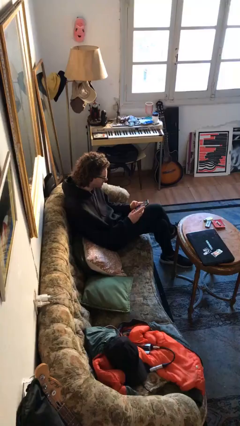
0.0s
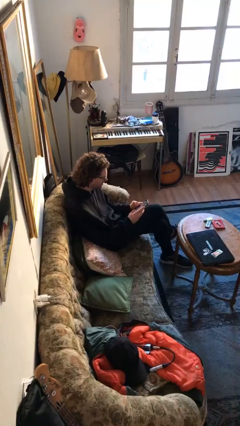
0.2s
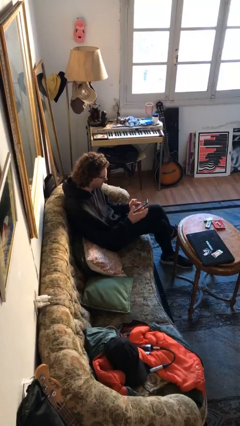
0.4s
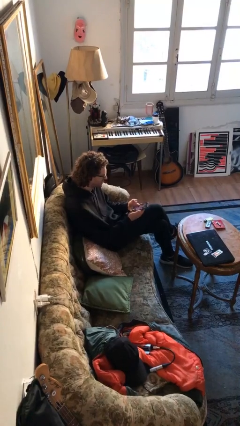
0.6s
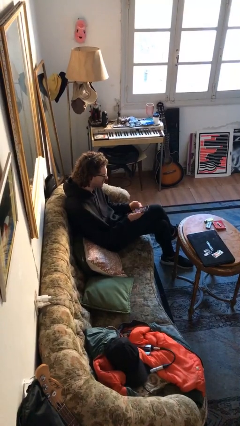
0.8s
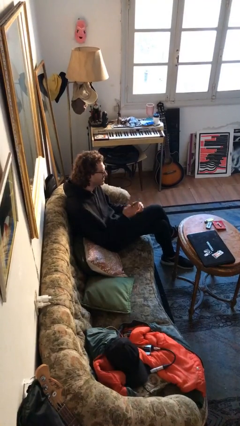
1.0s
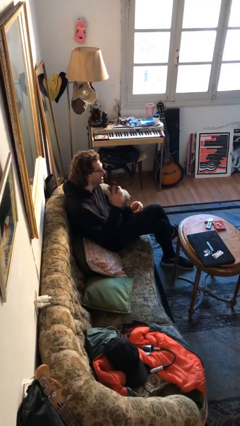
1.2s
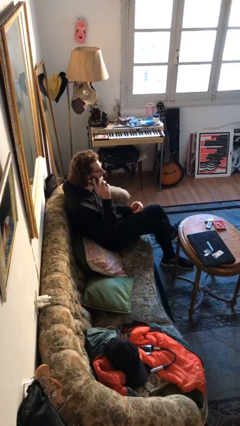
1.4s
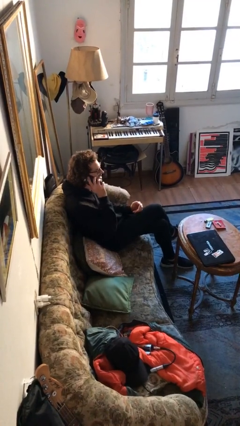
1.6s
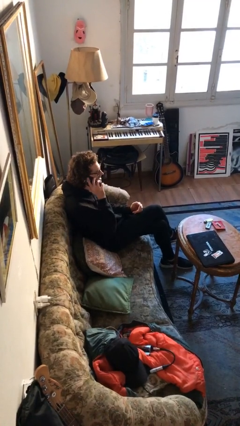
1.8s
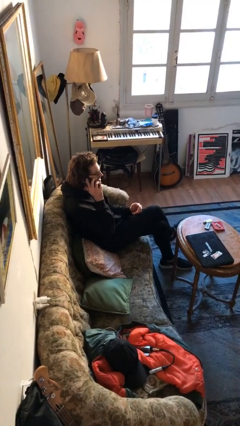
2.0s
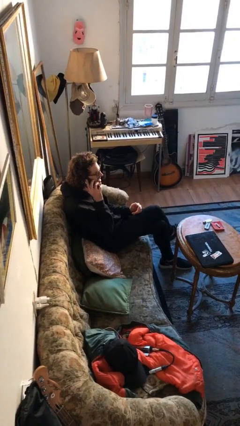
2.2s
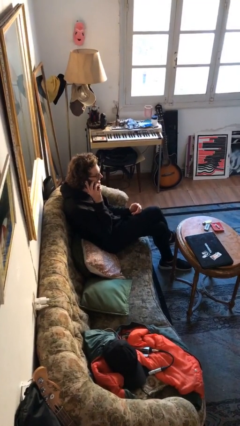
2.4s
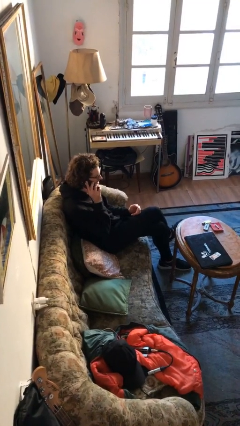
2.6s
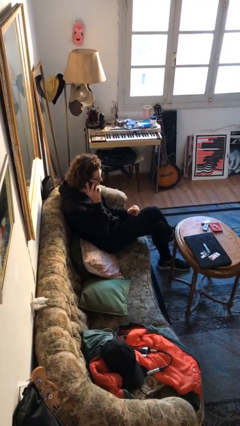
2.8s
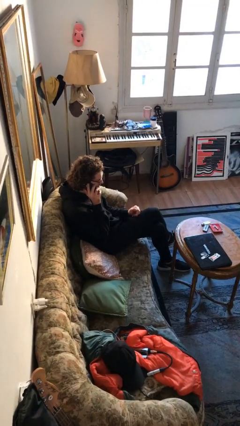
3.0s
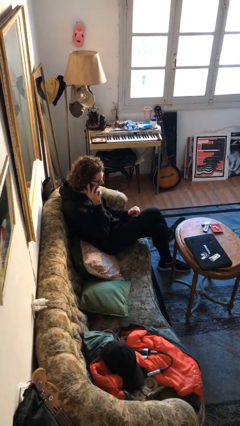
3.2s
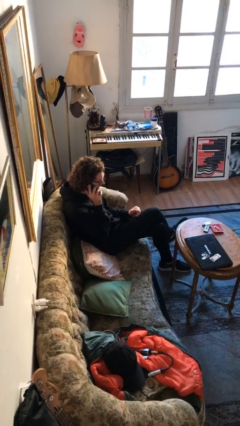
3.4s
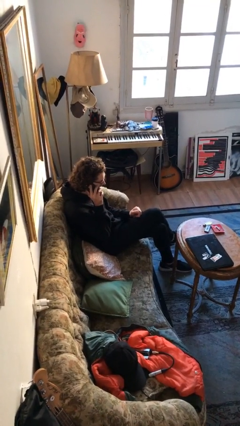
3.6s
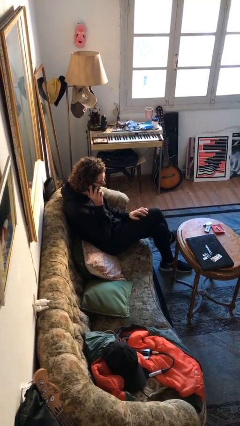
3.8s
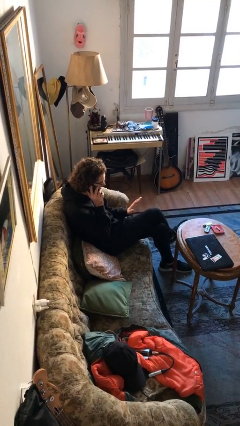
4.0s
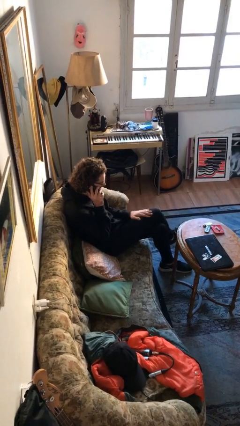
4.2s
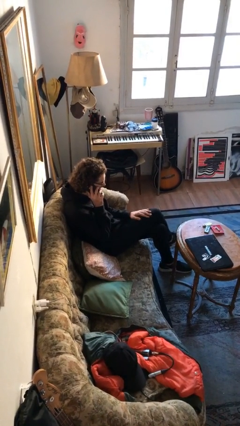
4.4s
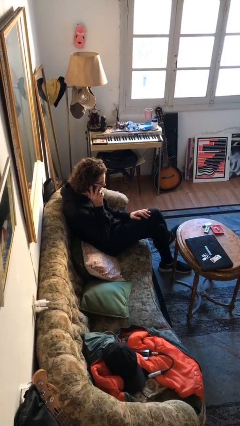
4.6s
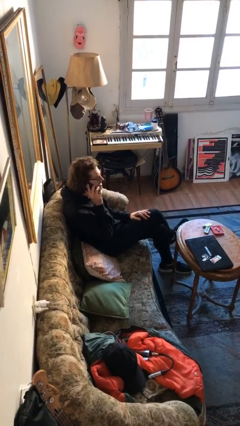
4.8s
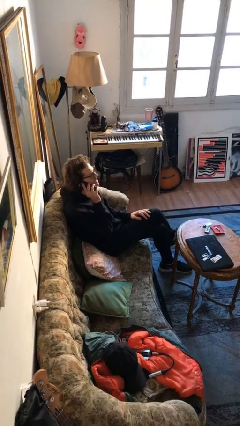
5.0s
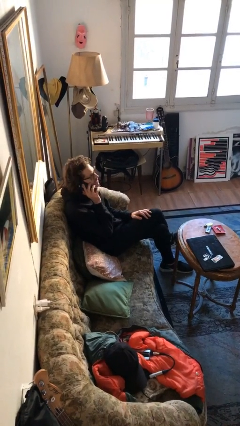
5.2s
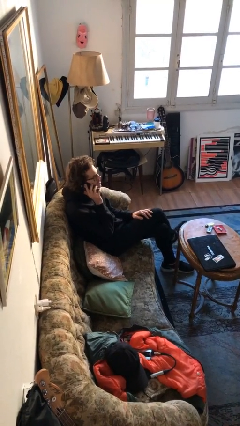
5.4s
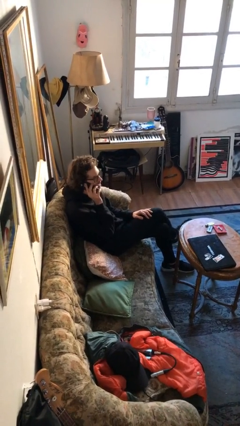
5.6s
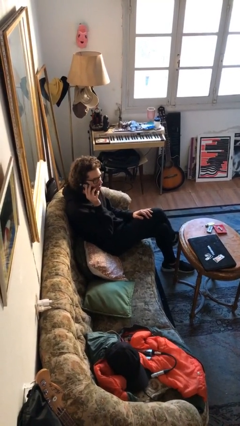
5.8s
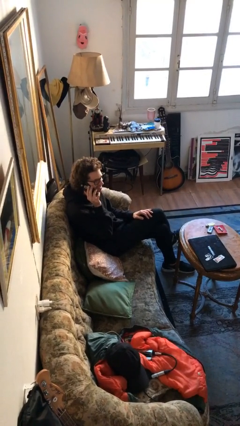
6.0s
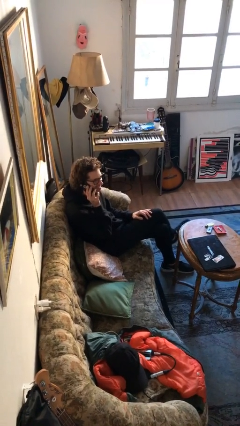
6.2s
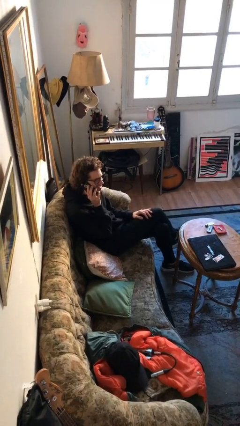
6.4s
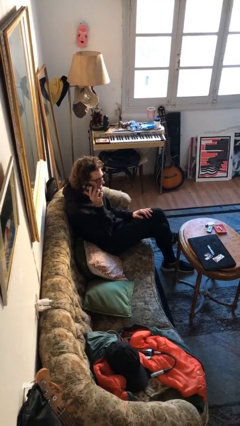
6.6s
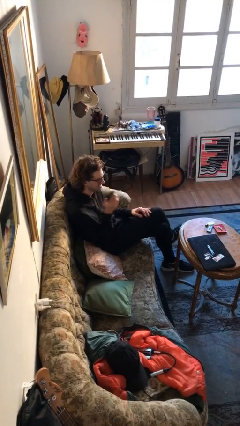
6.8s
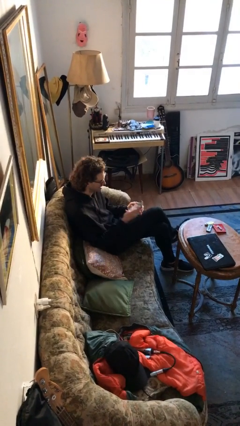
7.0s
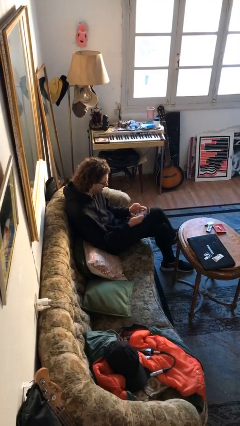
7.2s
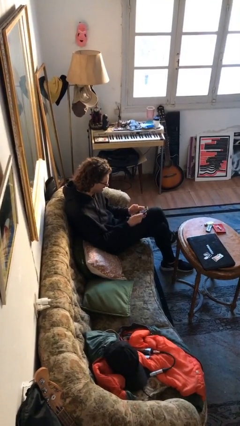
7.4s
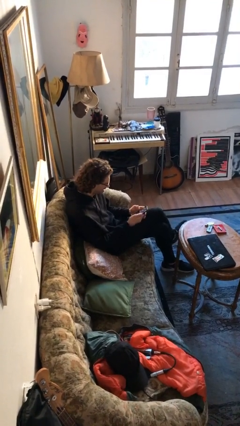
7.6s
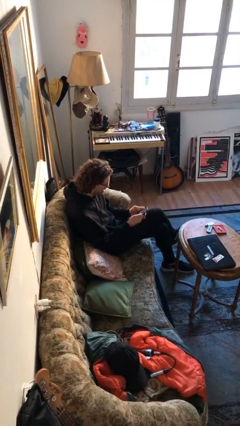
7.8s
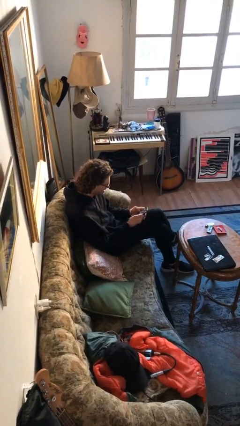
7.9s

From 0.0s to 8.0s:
person talks on phone

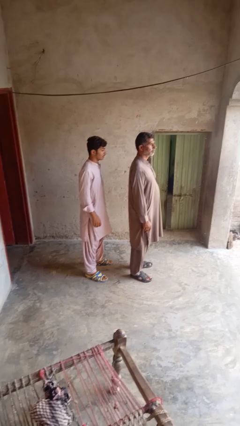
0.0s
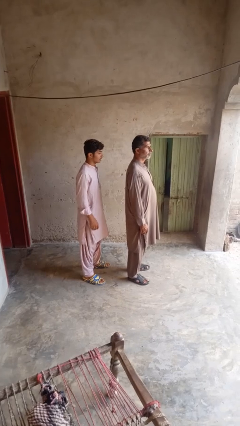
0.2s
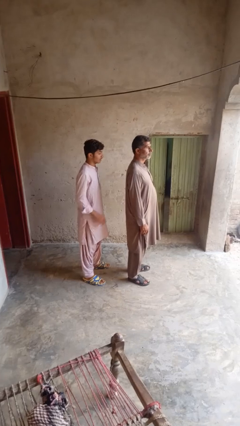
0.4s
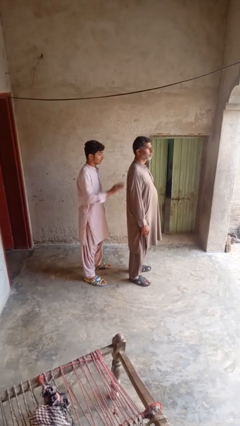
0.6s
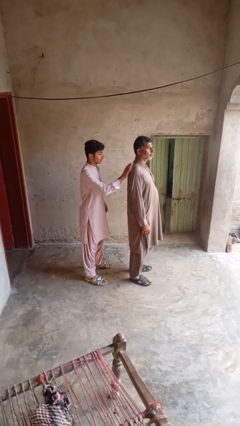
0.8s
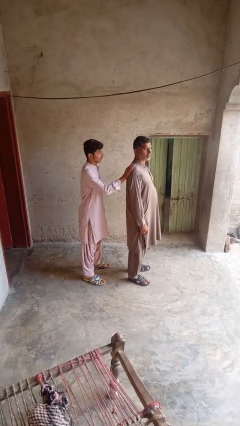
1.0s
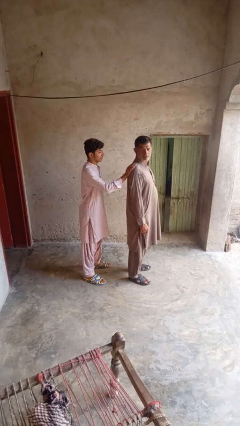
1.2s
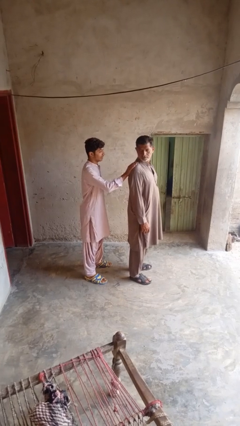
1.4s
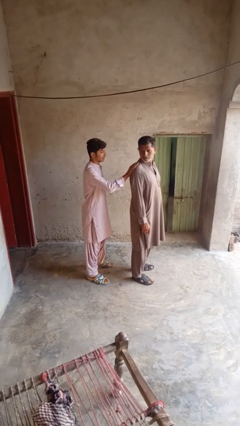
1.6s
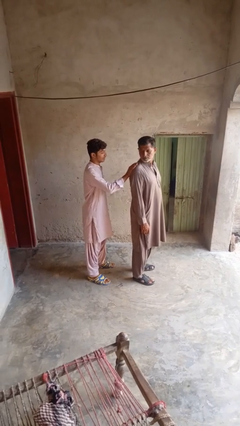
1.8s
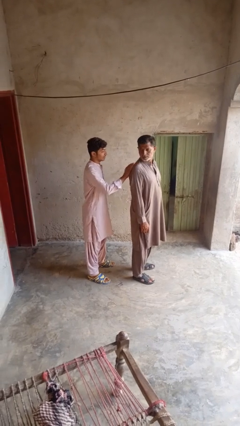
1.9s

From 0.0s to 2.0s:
person touches back of person

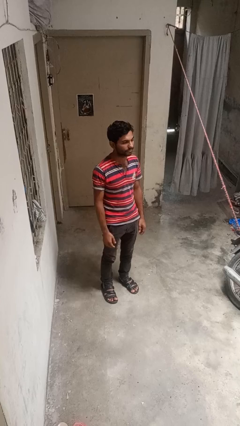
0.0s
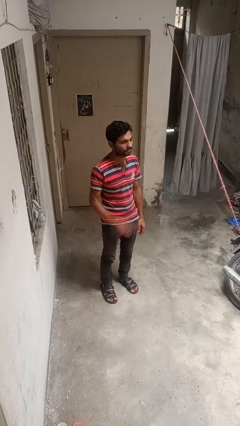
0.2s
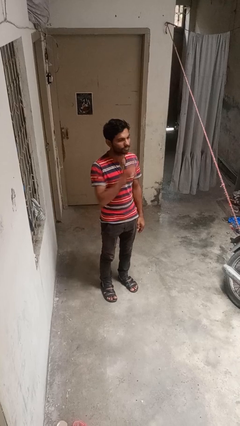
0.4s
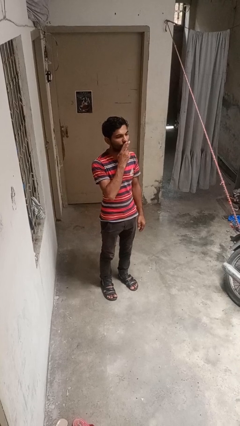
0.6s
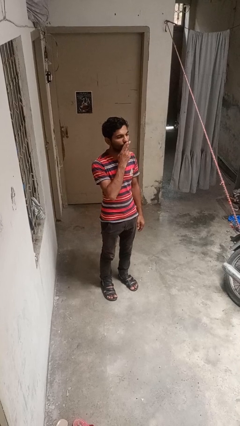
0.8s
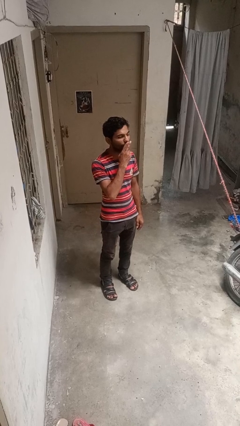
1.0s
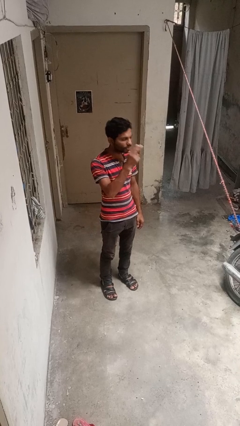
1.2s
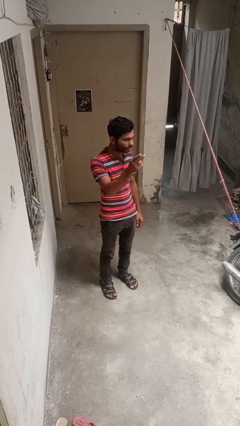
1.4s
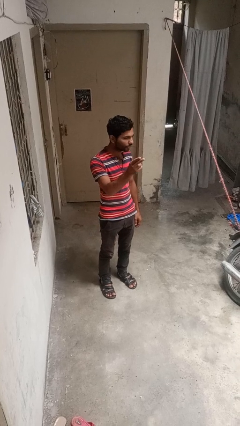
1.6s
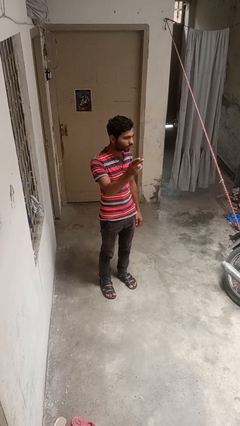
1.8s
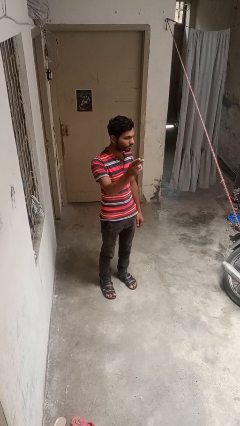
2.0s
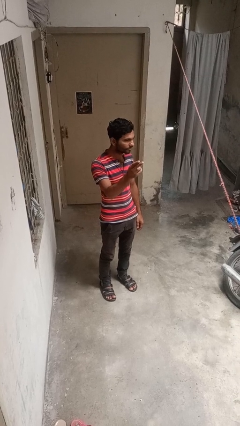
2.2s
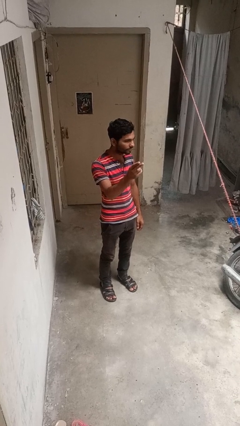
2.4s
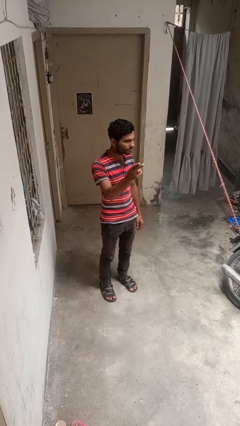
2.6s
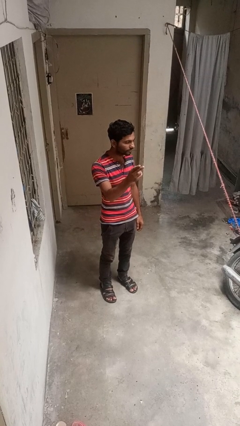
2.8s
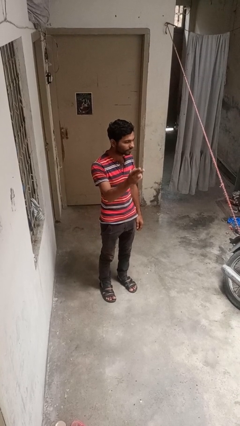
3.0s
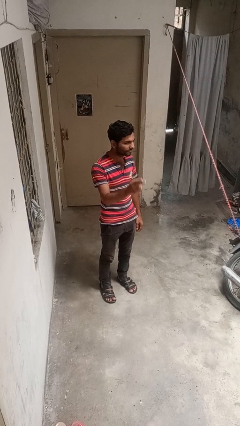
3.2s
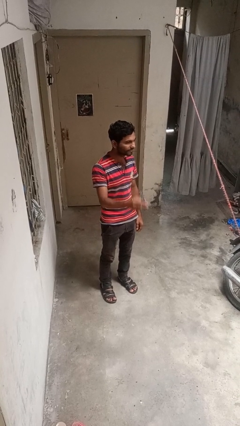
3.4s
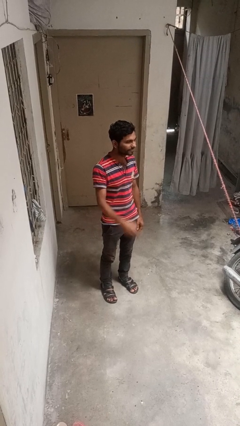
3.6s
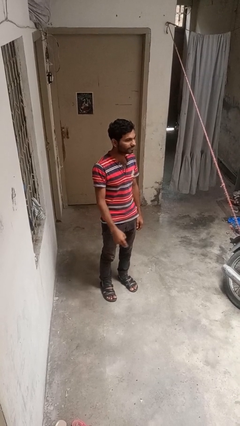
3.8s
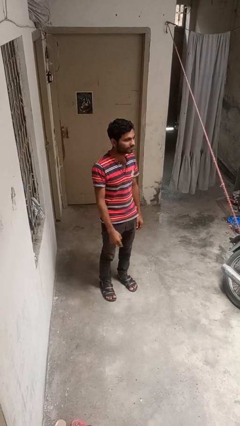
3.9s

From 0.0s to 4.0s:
person gestures blow kiss

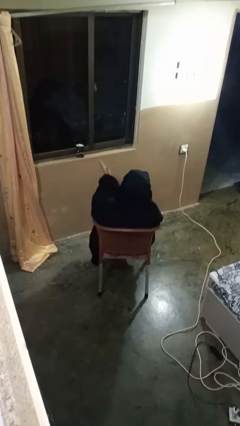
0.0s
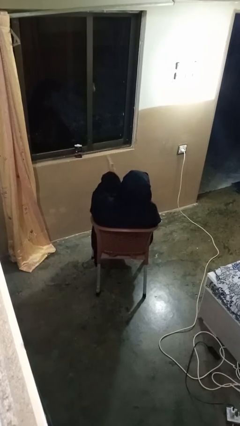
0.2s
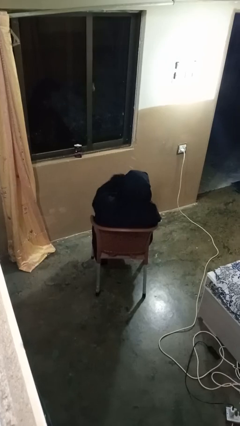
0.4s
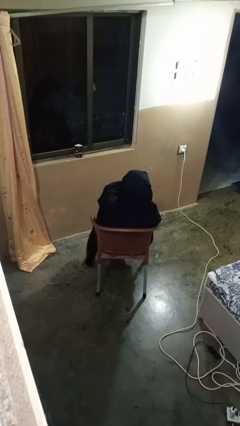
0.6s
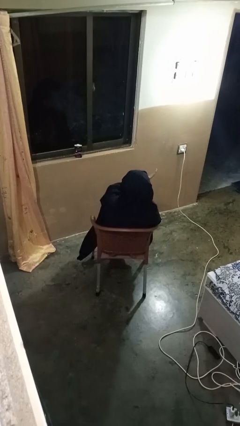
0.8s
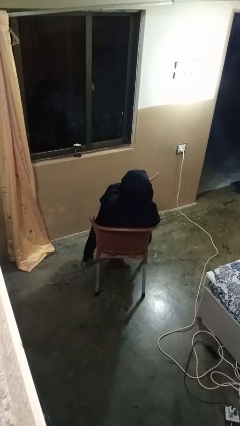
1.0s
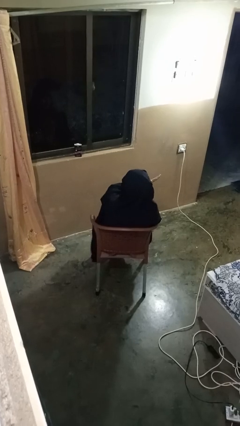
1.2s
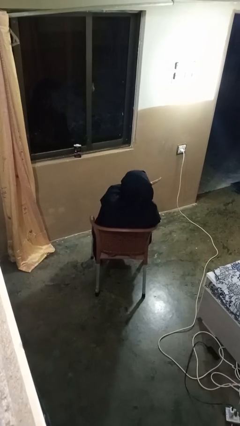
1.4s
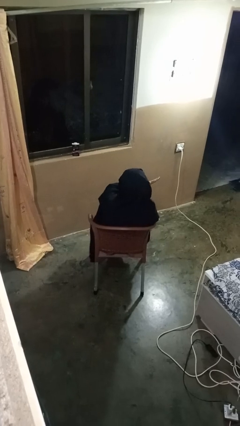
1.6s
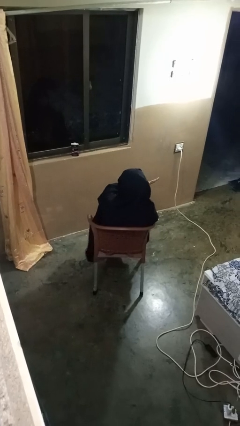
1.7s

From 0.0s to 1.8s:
person gestures swipe right

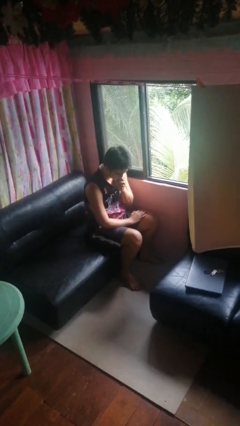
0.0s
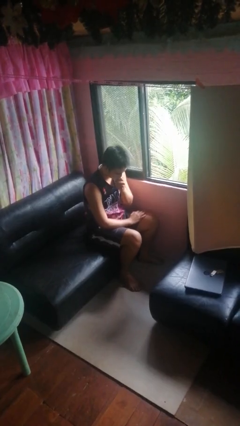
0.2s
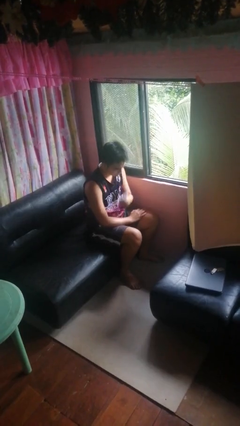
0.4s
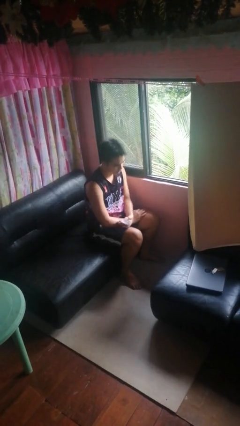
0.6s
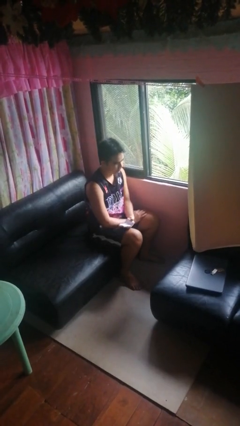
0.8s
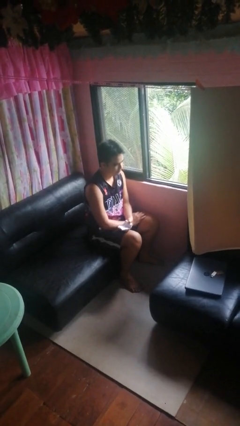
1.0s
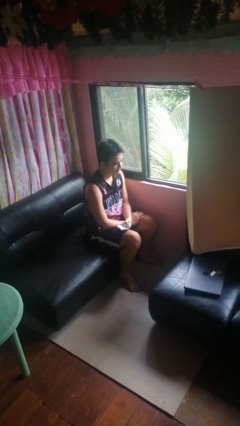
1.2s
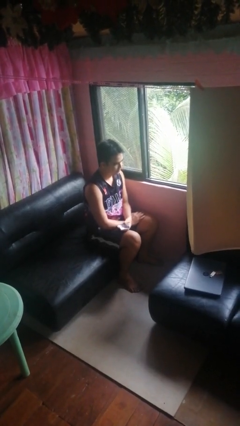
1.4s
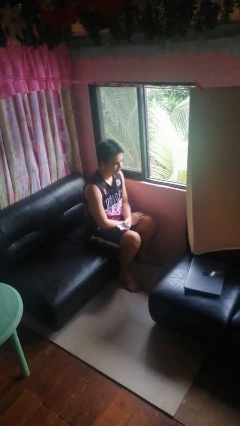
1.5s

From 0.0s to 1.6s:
person blows nose

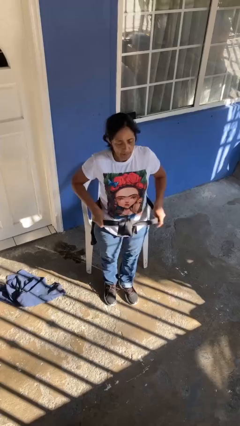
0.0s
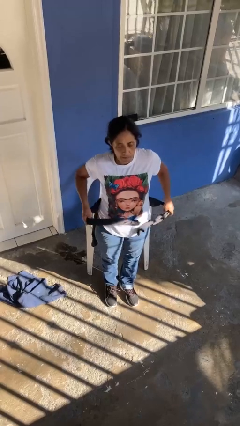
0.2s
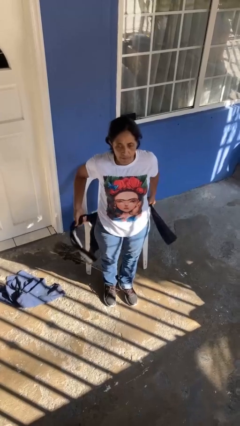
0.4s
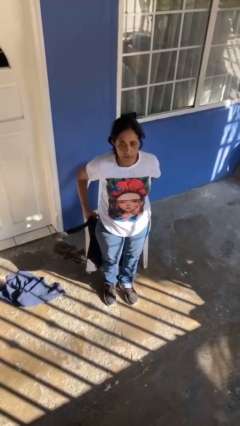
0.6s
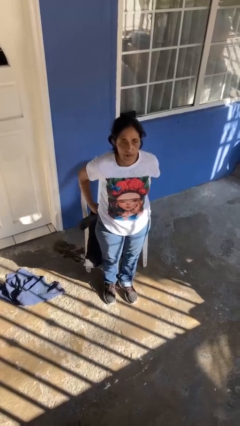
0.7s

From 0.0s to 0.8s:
person unties jacket around waist
